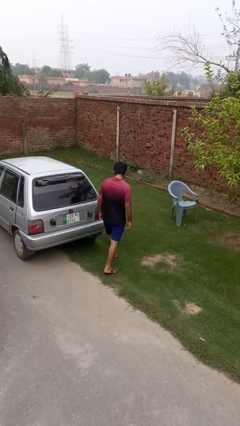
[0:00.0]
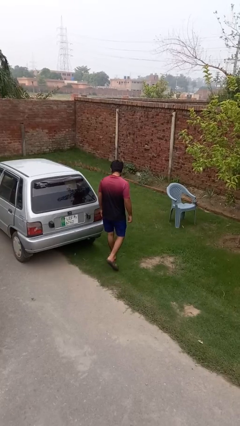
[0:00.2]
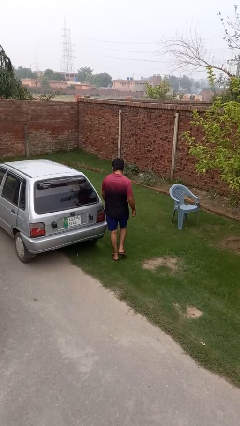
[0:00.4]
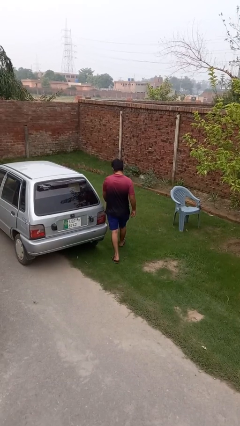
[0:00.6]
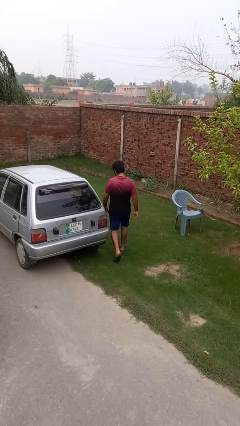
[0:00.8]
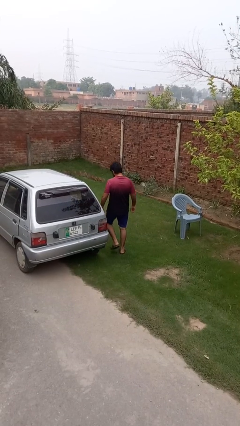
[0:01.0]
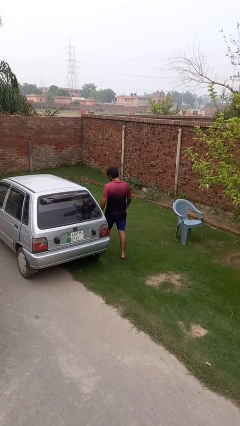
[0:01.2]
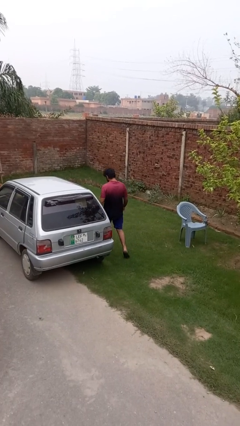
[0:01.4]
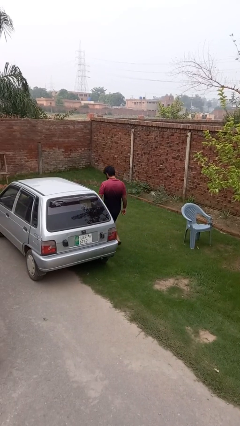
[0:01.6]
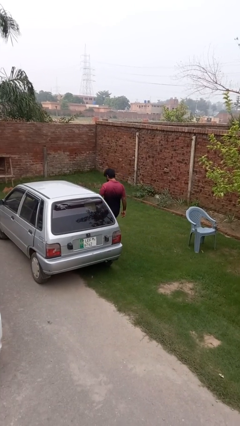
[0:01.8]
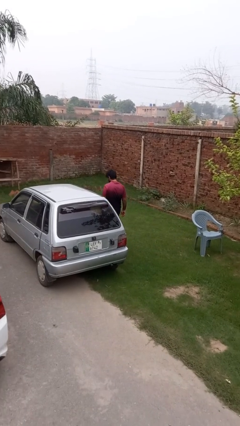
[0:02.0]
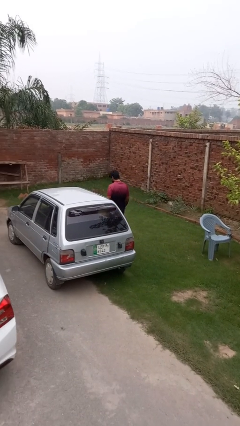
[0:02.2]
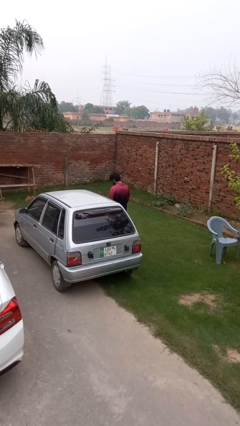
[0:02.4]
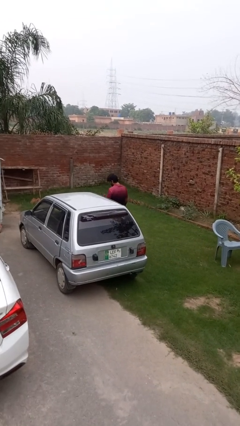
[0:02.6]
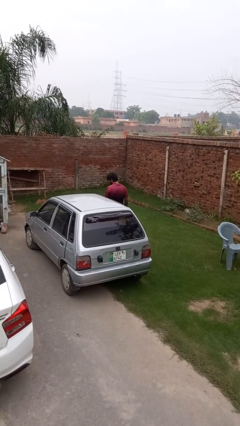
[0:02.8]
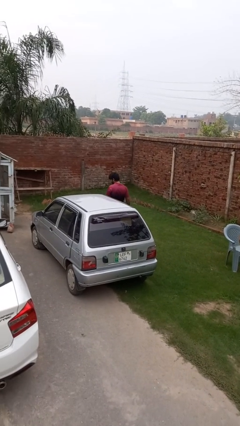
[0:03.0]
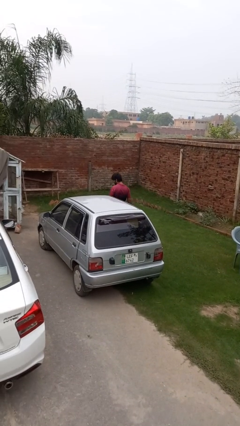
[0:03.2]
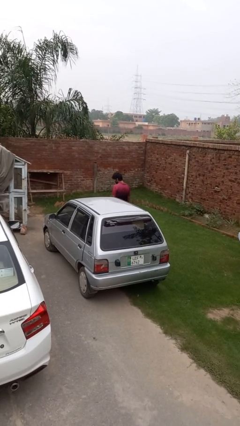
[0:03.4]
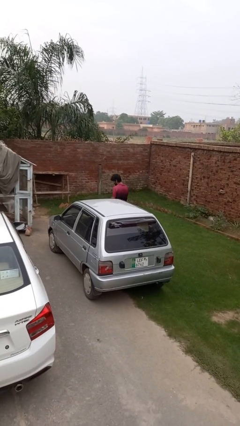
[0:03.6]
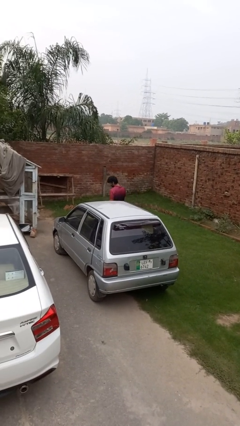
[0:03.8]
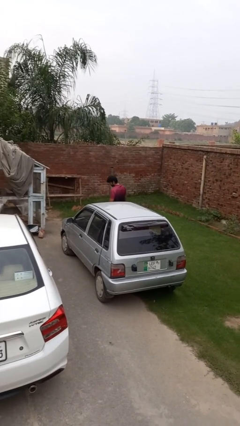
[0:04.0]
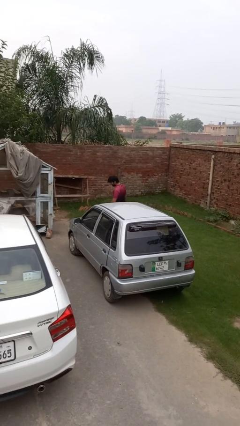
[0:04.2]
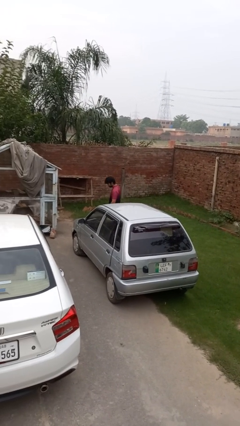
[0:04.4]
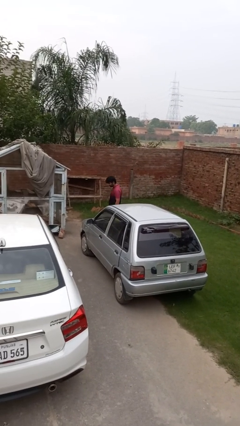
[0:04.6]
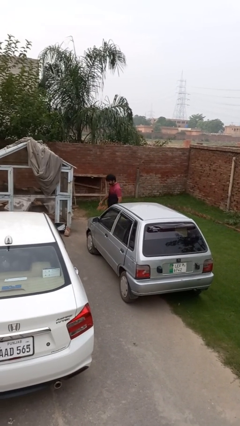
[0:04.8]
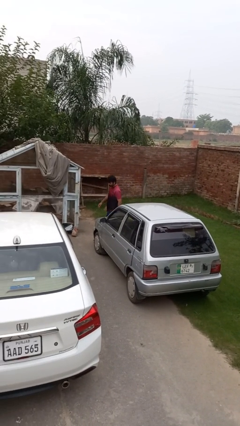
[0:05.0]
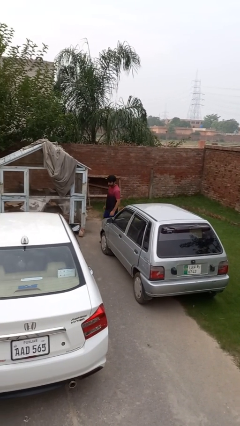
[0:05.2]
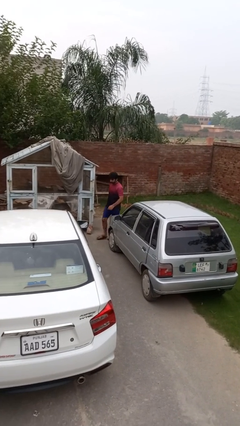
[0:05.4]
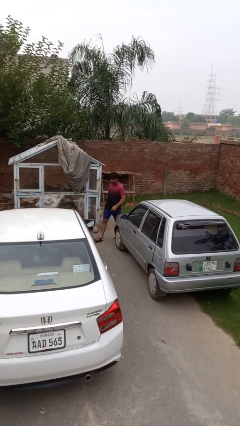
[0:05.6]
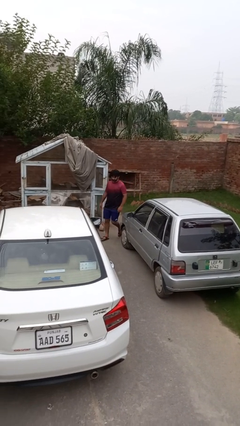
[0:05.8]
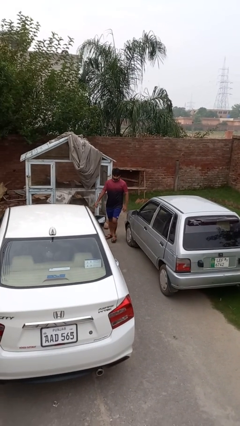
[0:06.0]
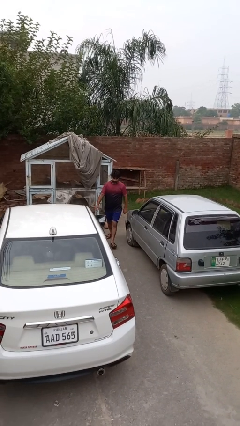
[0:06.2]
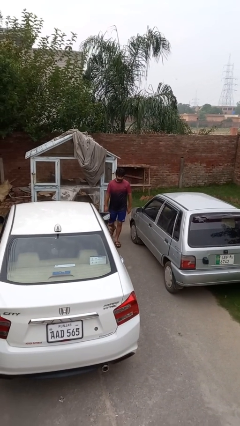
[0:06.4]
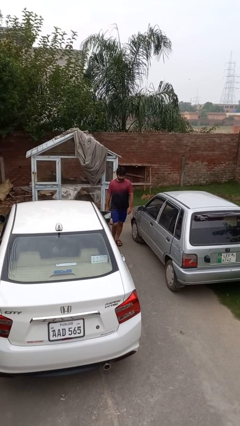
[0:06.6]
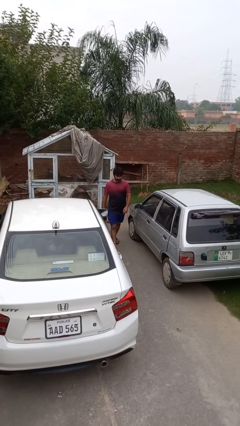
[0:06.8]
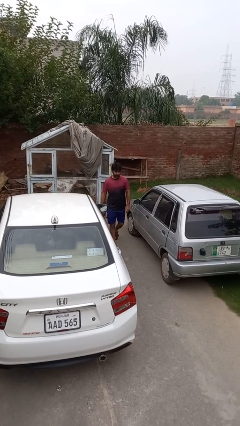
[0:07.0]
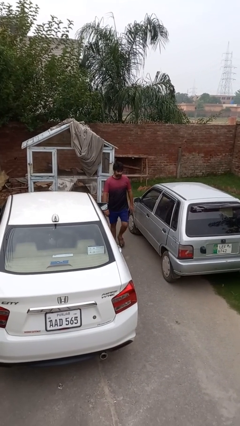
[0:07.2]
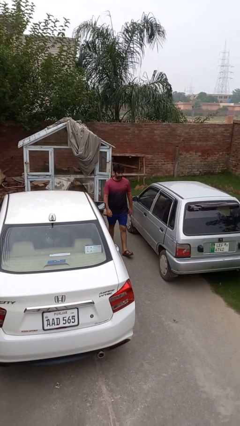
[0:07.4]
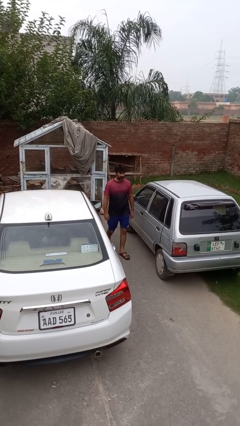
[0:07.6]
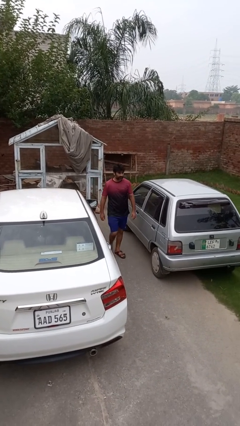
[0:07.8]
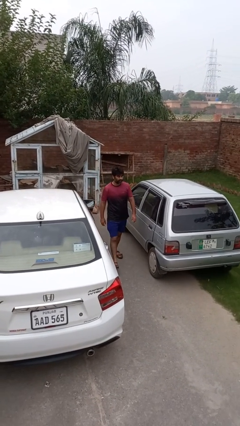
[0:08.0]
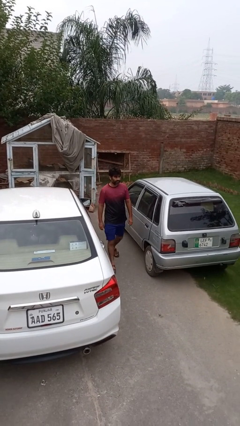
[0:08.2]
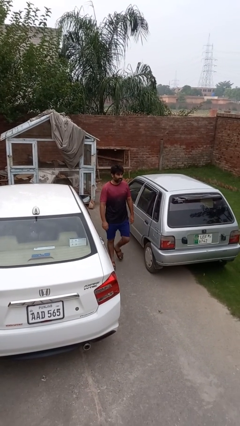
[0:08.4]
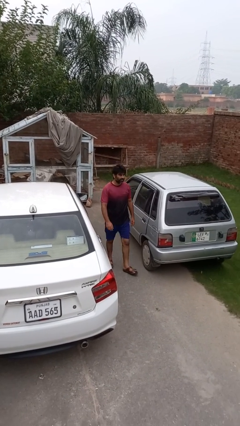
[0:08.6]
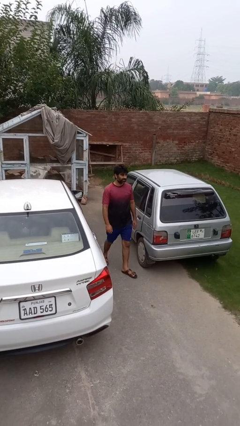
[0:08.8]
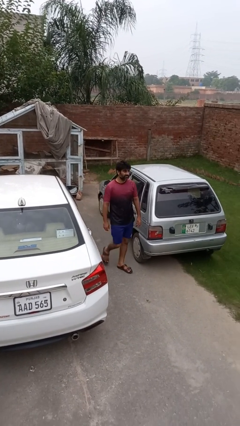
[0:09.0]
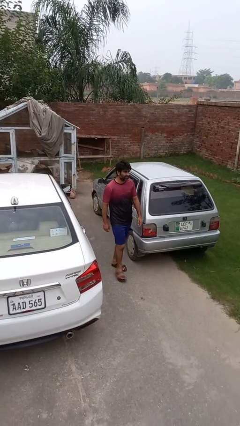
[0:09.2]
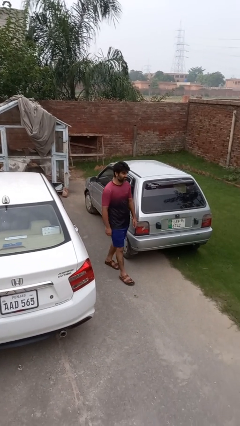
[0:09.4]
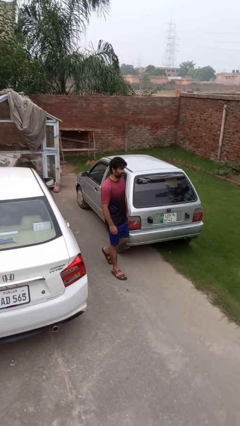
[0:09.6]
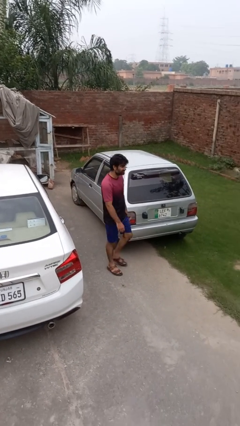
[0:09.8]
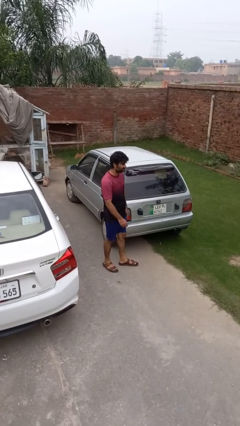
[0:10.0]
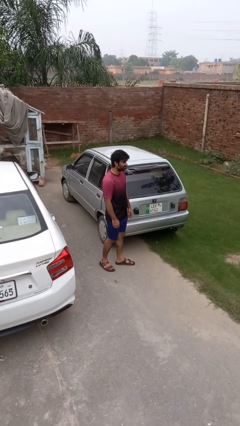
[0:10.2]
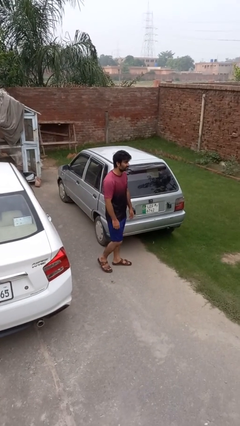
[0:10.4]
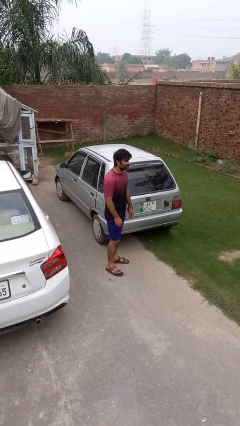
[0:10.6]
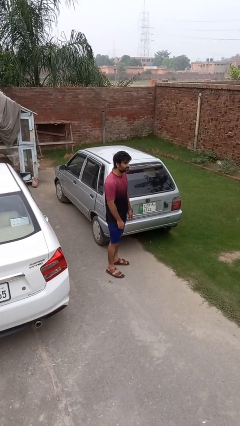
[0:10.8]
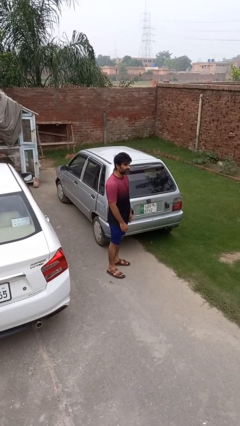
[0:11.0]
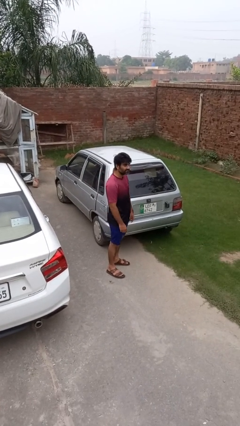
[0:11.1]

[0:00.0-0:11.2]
person walks around car

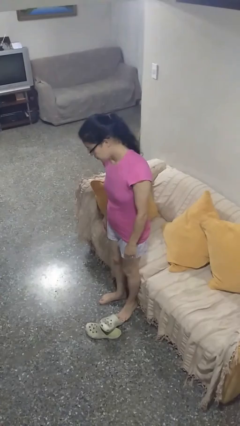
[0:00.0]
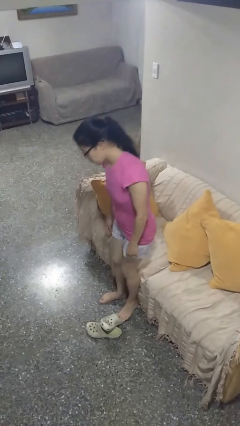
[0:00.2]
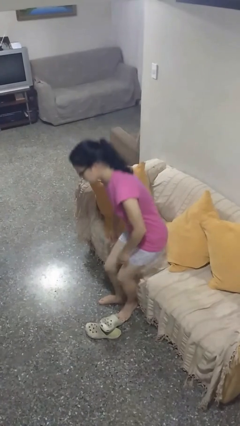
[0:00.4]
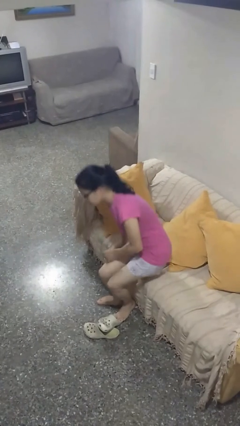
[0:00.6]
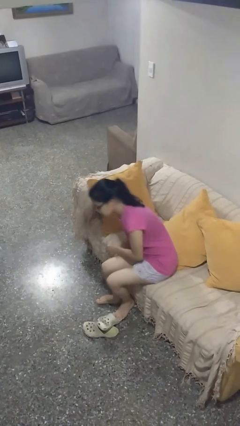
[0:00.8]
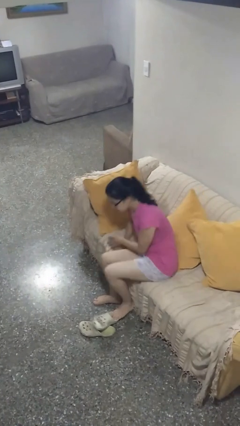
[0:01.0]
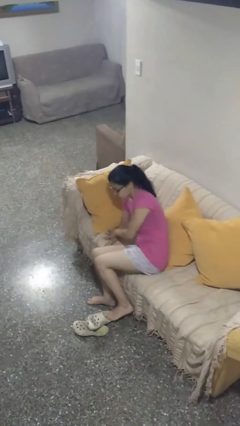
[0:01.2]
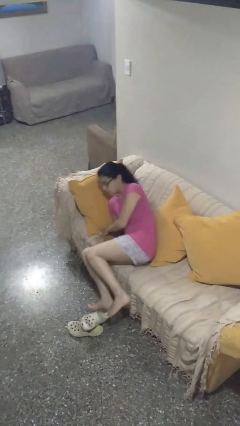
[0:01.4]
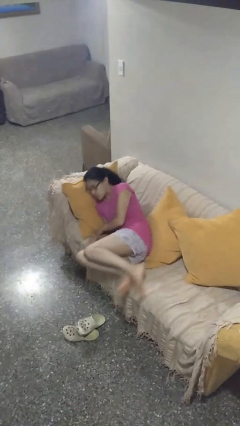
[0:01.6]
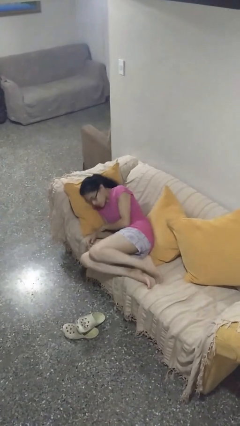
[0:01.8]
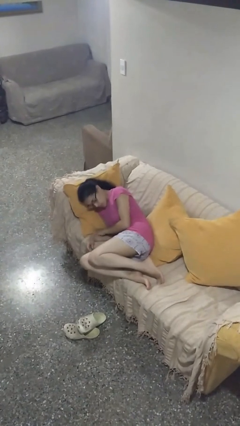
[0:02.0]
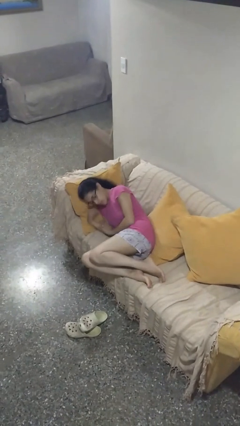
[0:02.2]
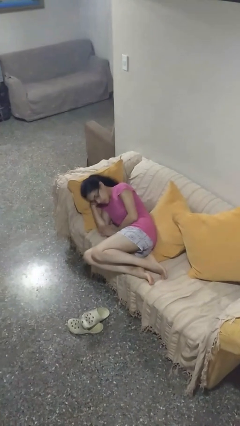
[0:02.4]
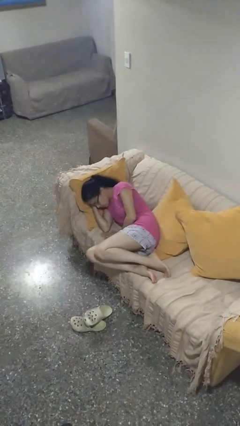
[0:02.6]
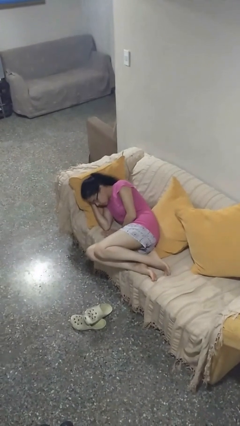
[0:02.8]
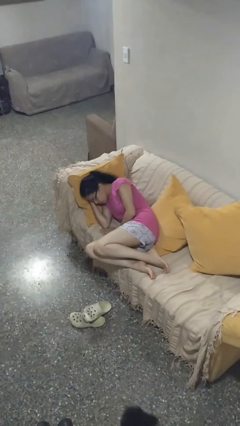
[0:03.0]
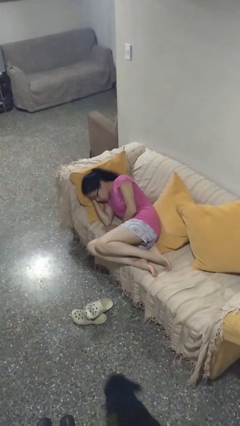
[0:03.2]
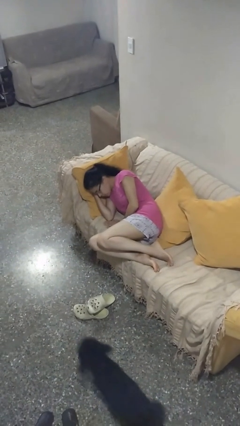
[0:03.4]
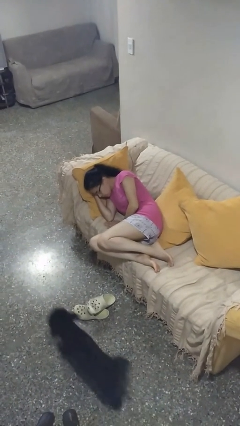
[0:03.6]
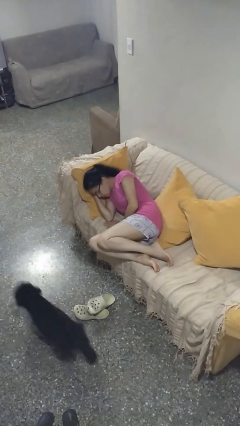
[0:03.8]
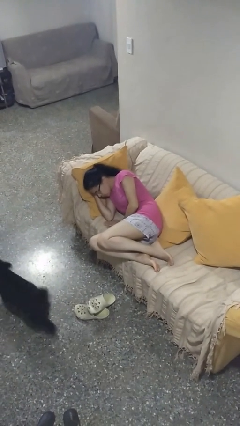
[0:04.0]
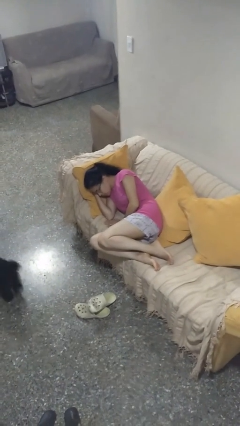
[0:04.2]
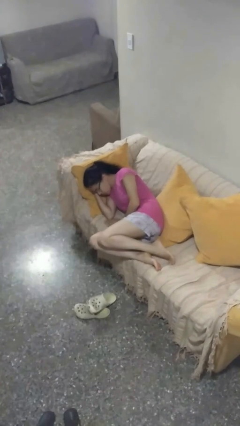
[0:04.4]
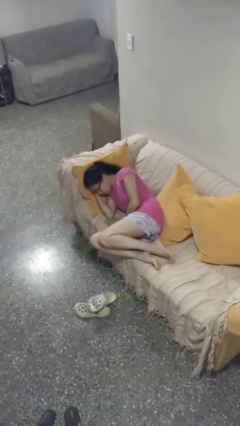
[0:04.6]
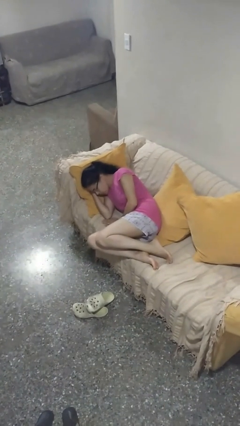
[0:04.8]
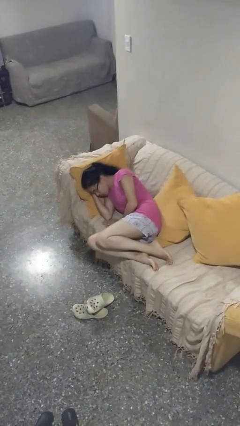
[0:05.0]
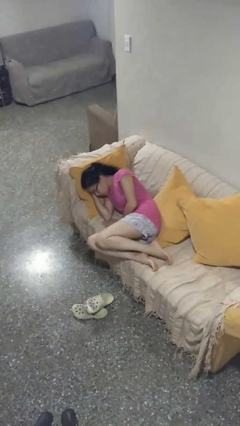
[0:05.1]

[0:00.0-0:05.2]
person lies down on couch

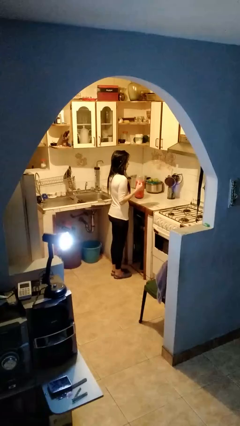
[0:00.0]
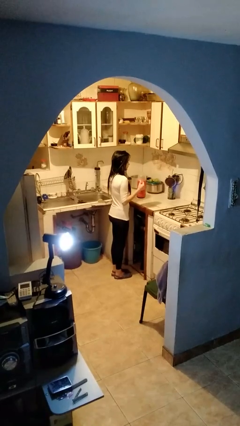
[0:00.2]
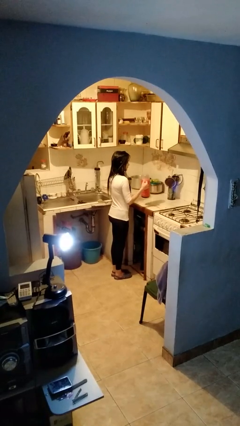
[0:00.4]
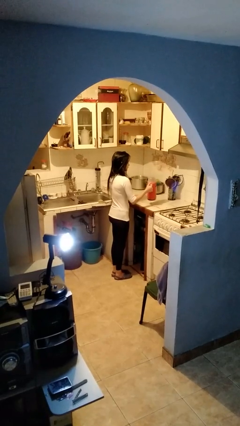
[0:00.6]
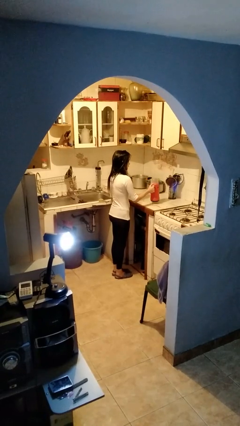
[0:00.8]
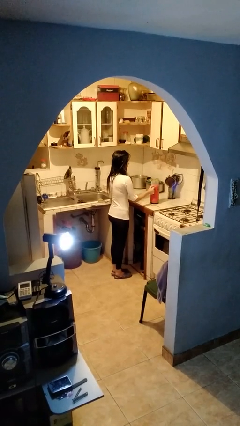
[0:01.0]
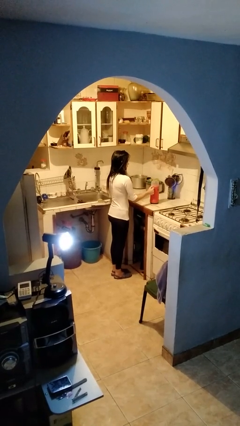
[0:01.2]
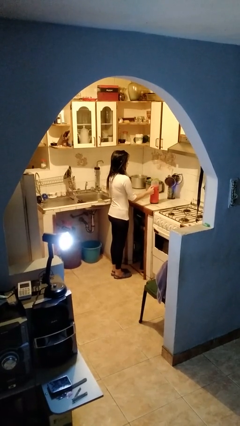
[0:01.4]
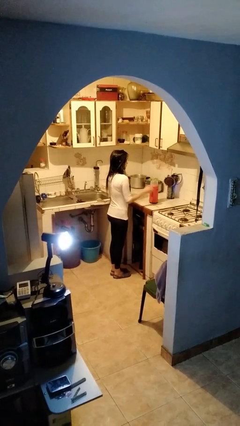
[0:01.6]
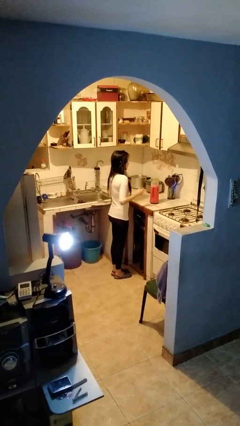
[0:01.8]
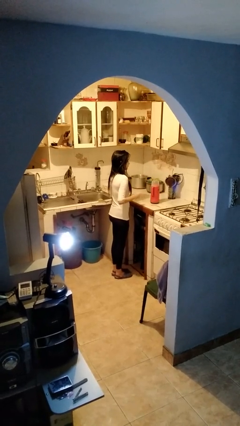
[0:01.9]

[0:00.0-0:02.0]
person puts down object on countertop
